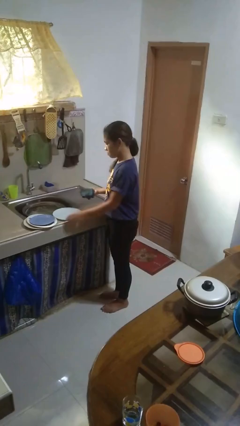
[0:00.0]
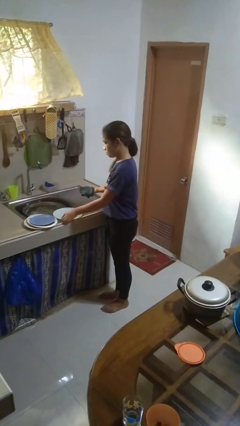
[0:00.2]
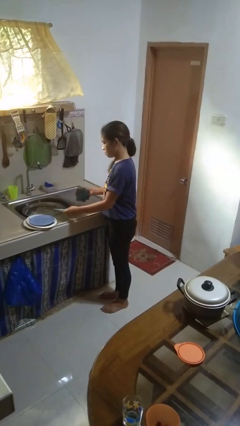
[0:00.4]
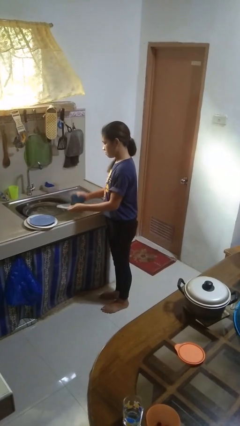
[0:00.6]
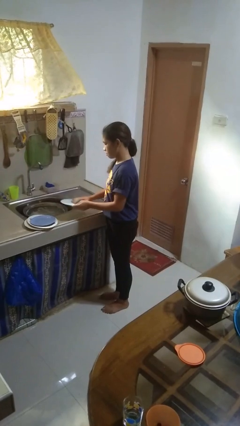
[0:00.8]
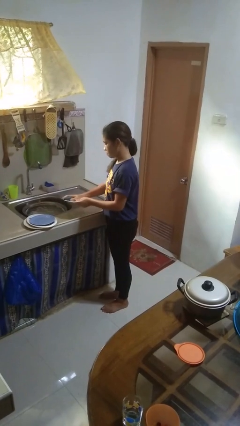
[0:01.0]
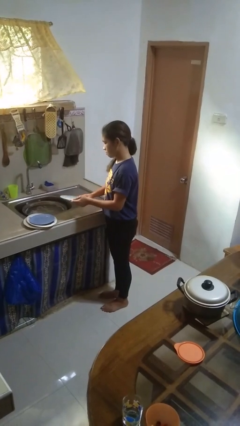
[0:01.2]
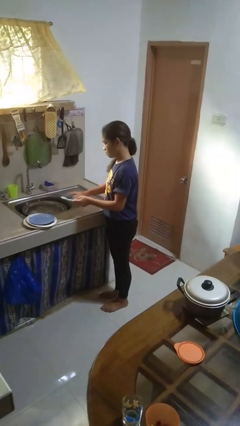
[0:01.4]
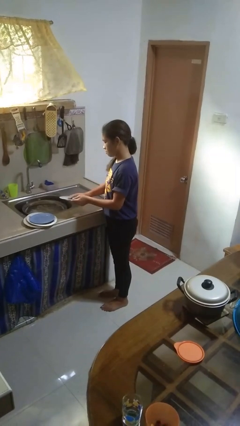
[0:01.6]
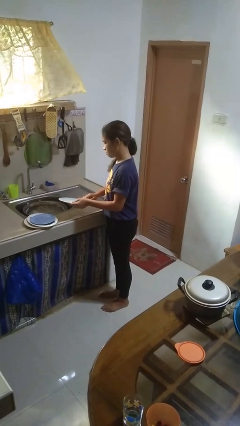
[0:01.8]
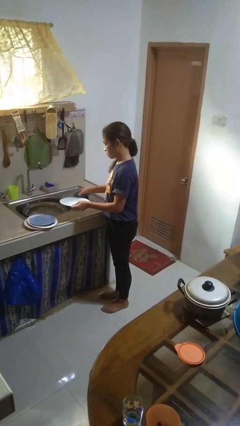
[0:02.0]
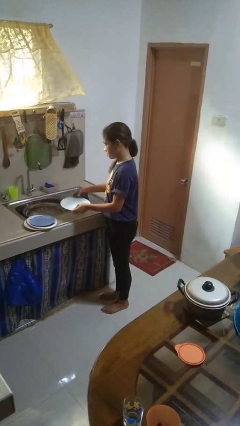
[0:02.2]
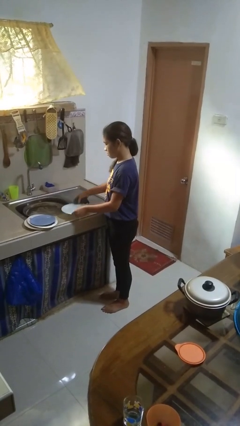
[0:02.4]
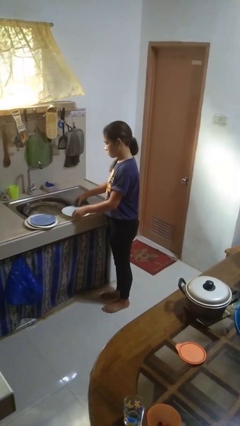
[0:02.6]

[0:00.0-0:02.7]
person dries dish

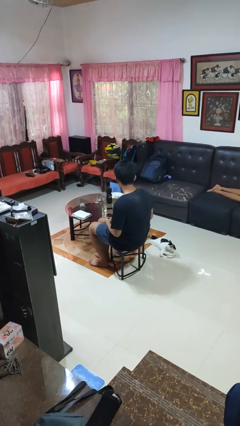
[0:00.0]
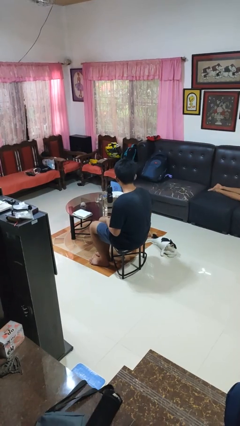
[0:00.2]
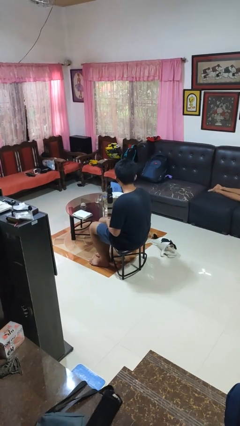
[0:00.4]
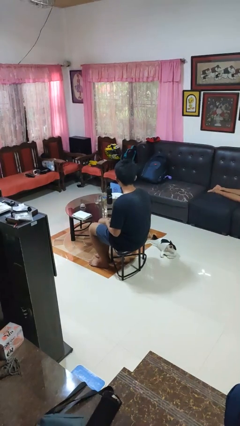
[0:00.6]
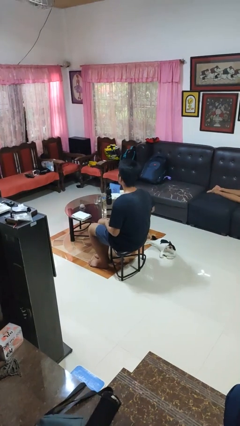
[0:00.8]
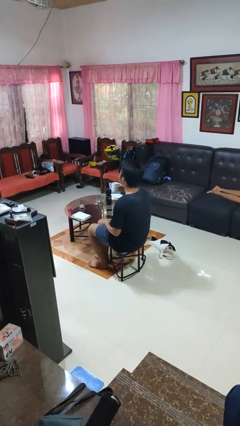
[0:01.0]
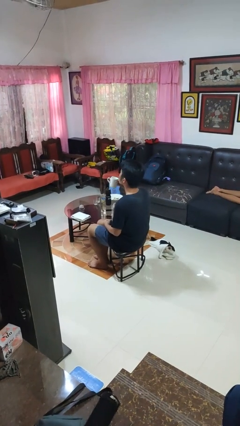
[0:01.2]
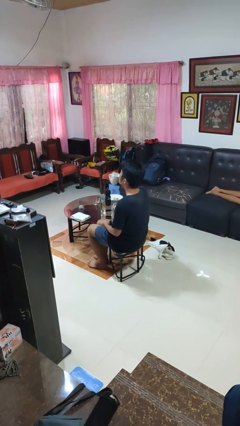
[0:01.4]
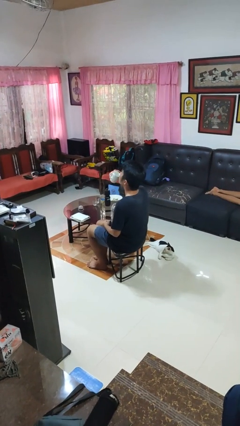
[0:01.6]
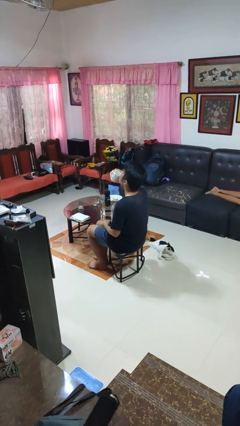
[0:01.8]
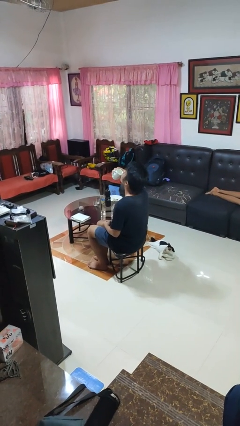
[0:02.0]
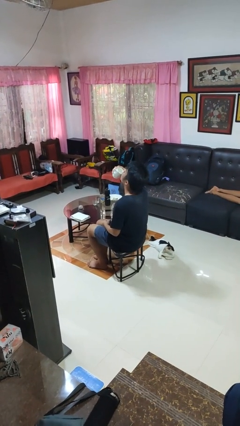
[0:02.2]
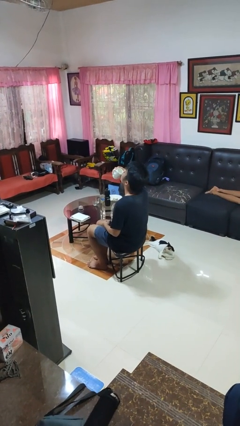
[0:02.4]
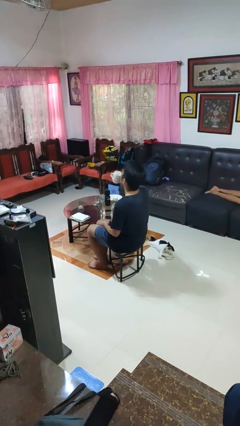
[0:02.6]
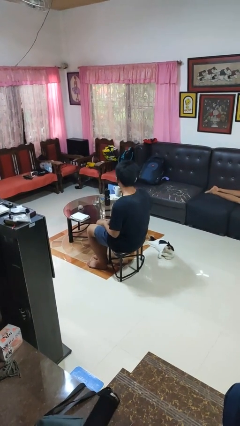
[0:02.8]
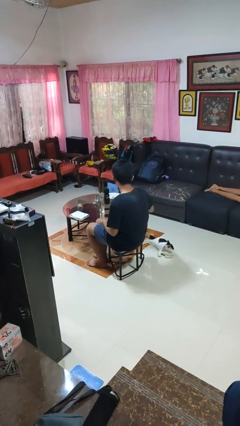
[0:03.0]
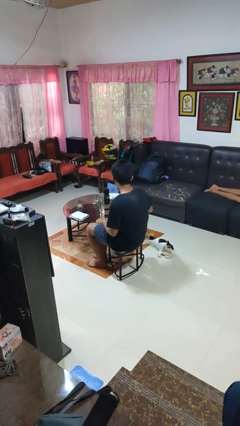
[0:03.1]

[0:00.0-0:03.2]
person drinks from cup

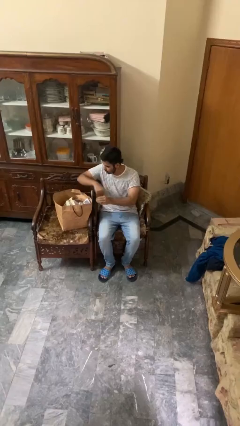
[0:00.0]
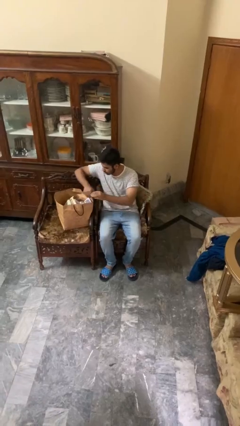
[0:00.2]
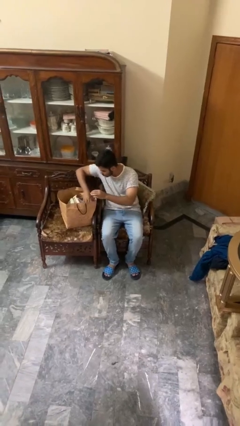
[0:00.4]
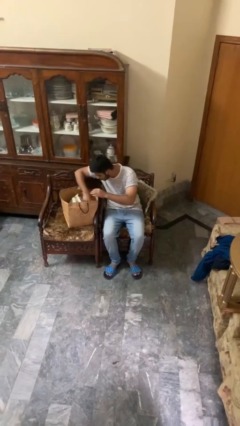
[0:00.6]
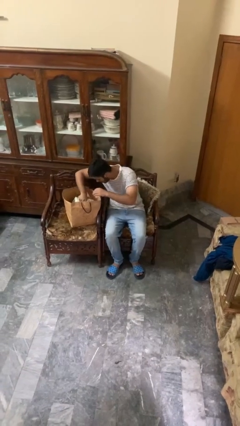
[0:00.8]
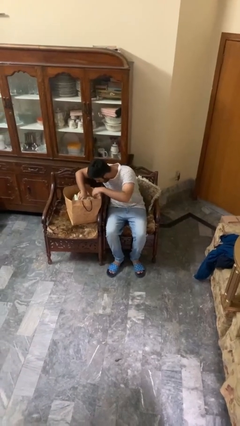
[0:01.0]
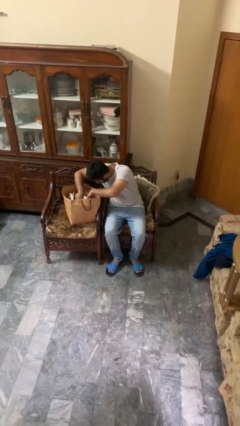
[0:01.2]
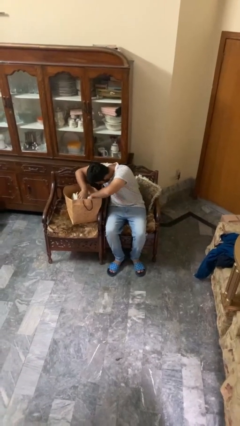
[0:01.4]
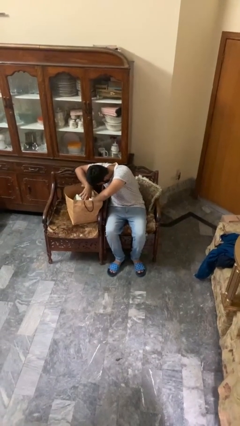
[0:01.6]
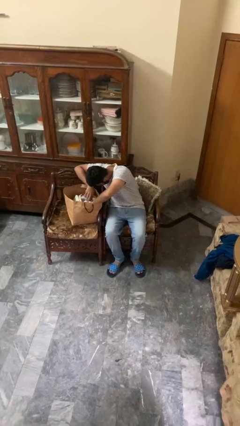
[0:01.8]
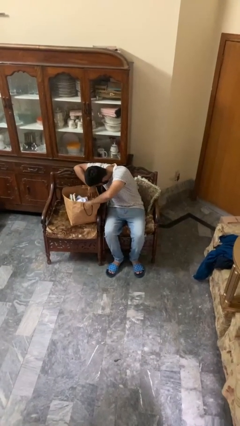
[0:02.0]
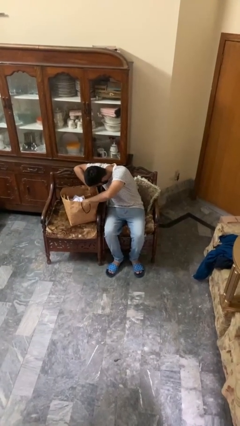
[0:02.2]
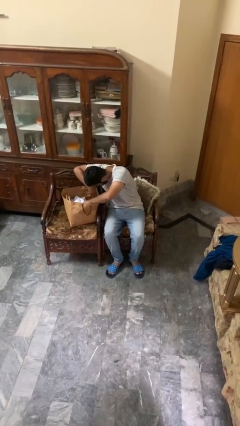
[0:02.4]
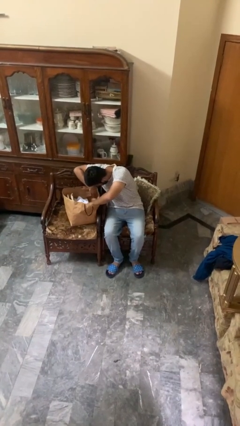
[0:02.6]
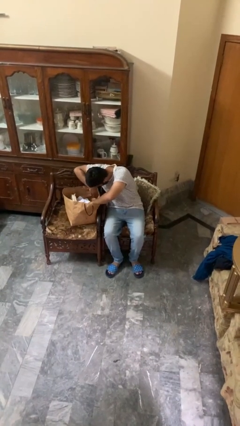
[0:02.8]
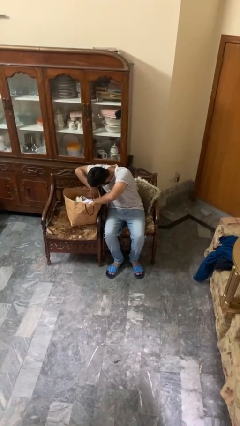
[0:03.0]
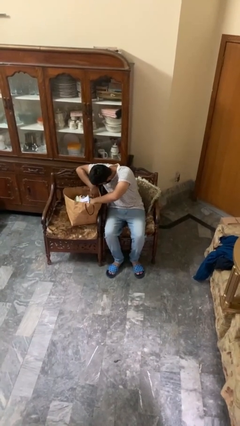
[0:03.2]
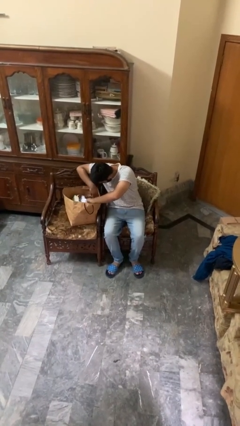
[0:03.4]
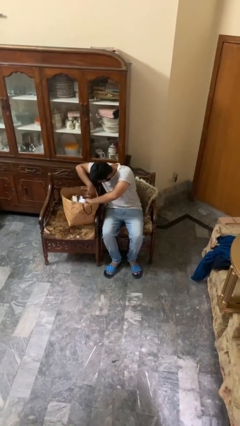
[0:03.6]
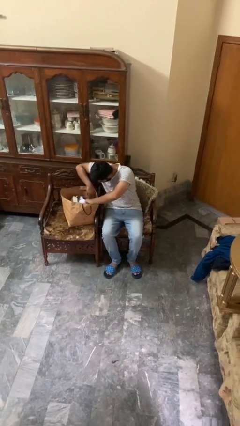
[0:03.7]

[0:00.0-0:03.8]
person searches in bag

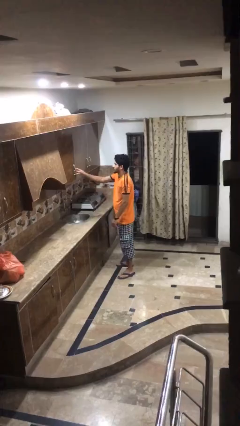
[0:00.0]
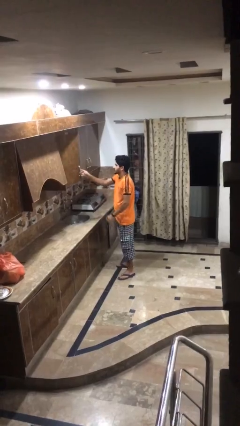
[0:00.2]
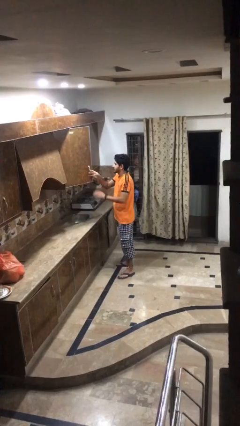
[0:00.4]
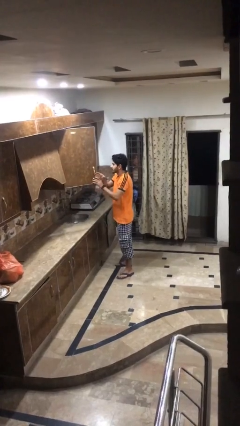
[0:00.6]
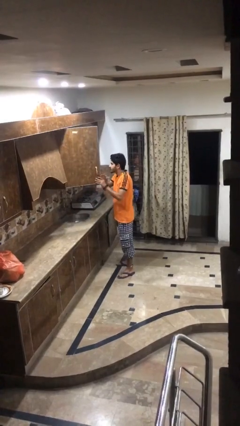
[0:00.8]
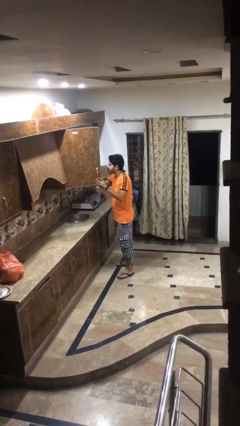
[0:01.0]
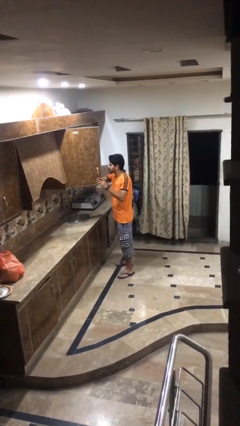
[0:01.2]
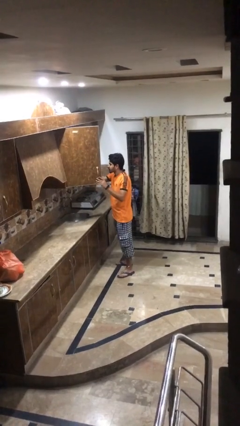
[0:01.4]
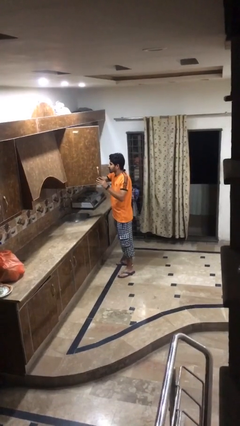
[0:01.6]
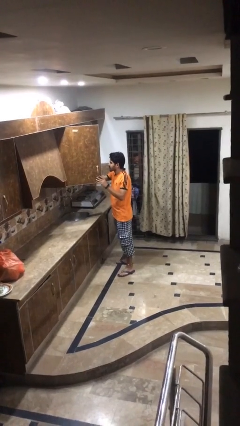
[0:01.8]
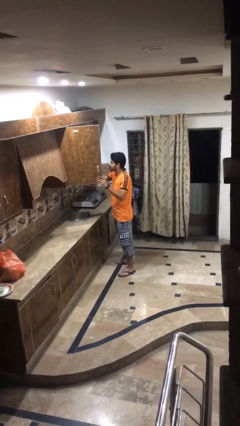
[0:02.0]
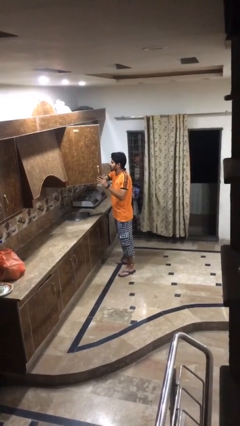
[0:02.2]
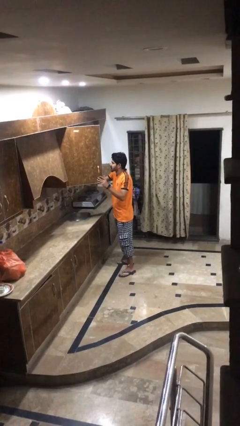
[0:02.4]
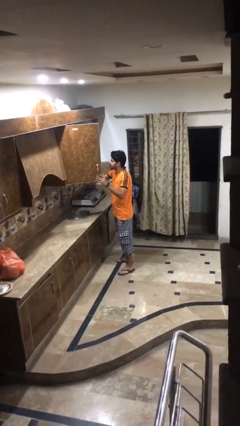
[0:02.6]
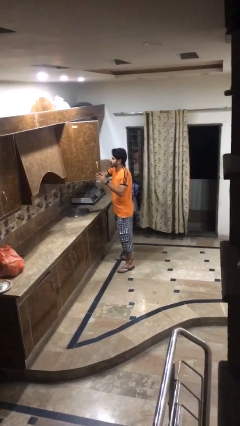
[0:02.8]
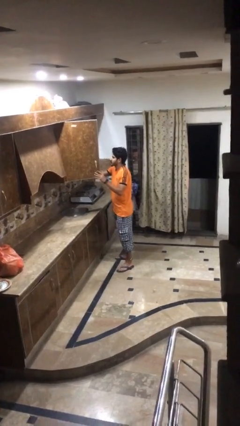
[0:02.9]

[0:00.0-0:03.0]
person opens kitchen drawer

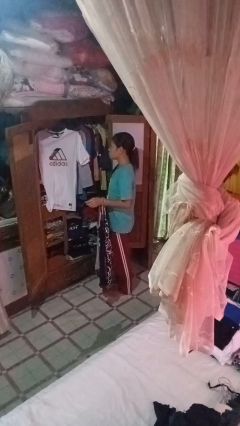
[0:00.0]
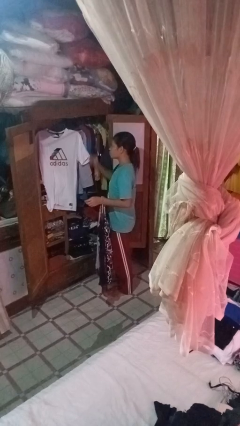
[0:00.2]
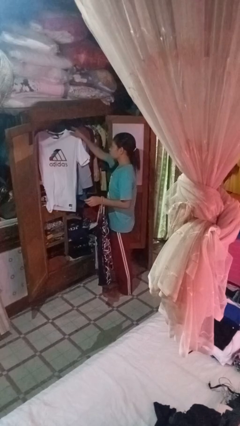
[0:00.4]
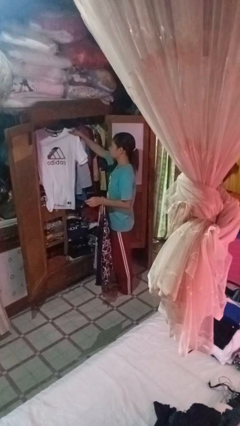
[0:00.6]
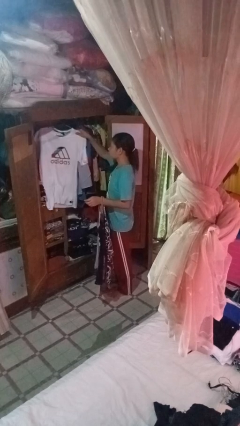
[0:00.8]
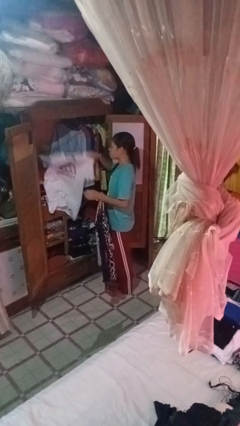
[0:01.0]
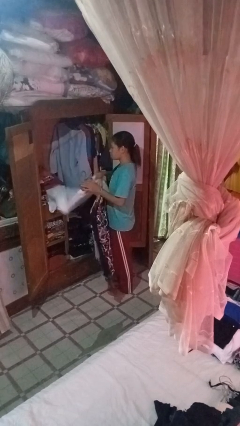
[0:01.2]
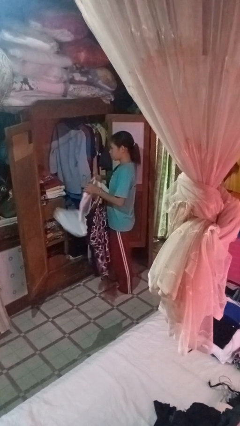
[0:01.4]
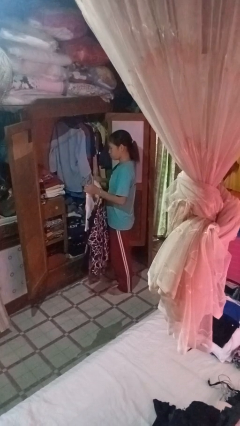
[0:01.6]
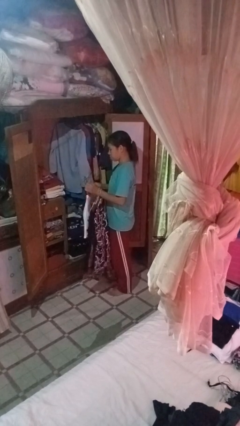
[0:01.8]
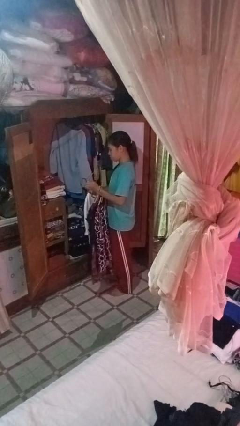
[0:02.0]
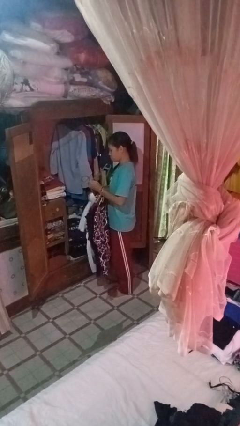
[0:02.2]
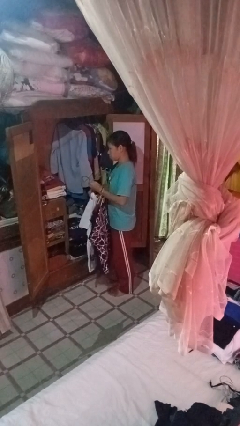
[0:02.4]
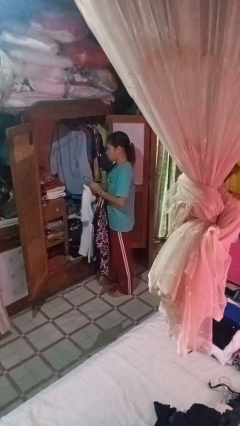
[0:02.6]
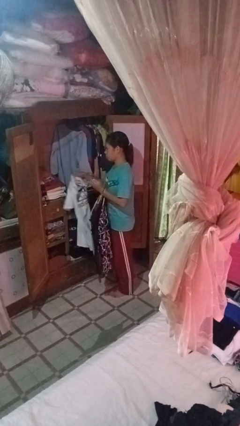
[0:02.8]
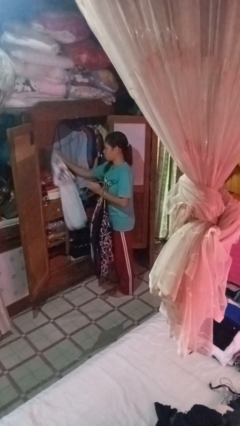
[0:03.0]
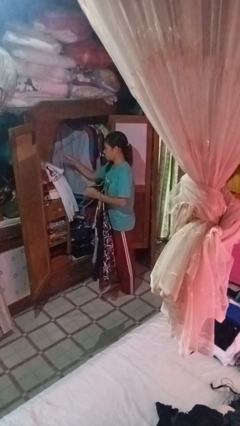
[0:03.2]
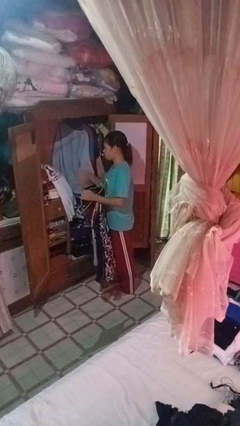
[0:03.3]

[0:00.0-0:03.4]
person takes clothes from closet

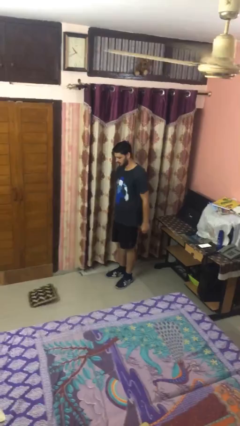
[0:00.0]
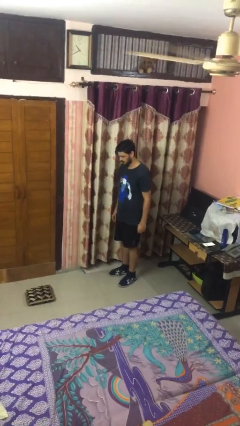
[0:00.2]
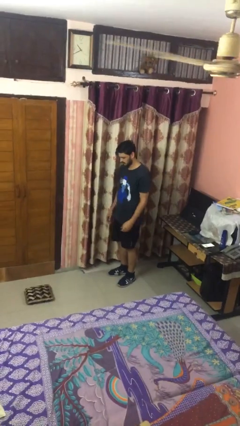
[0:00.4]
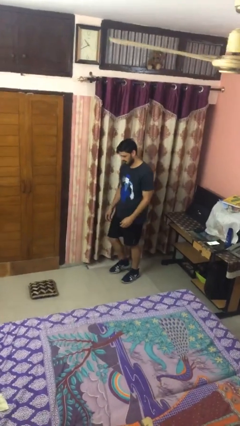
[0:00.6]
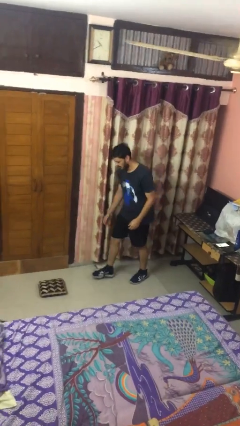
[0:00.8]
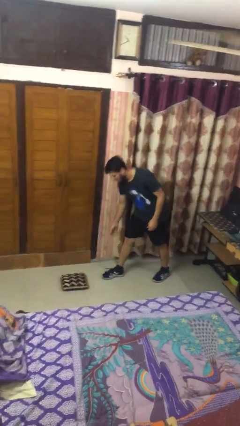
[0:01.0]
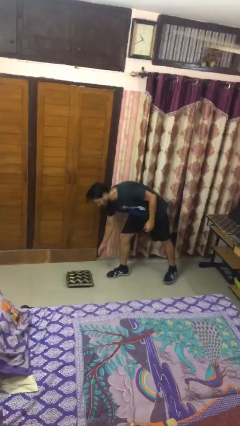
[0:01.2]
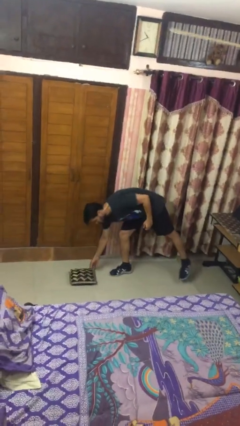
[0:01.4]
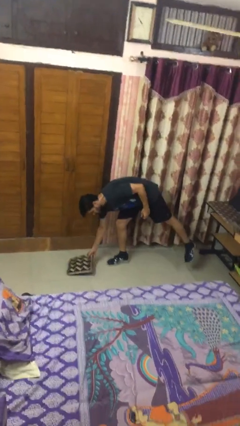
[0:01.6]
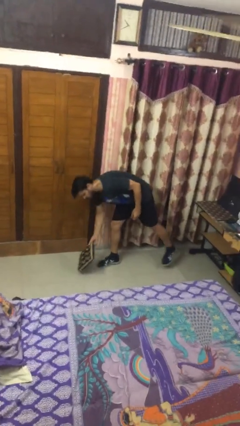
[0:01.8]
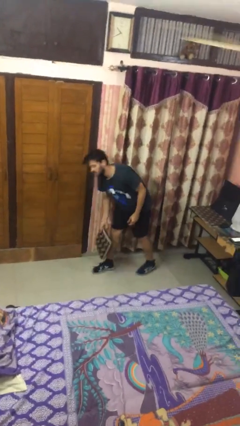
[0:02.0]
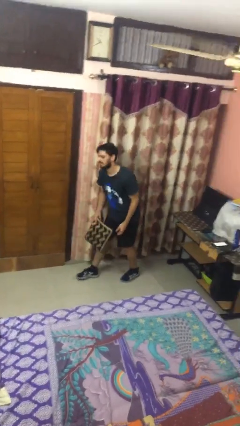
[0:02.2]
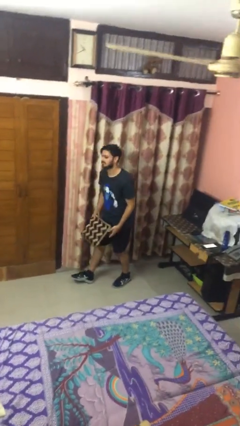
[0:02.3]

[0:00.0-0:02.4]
person picks up object from floor
